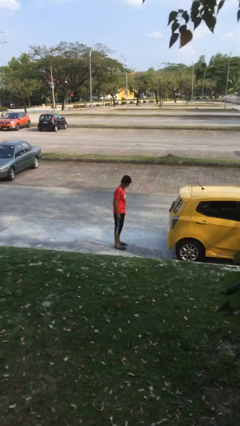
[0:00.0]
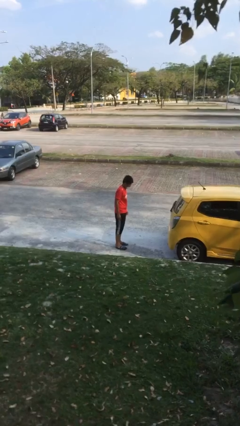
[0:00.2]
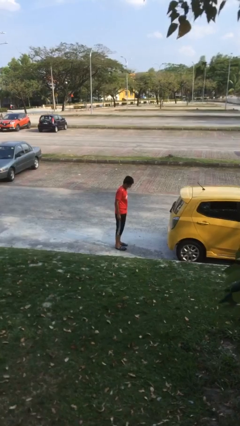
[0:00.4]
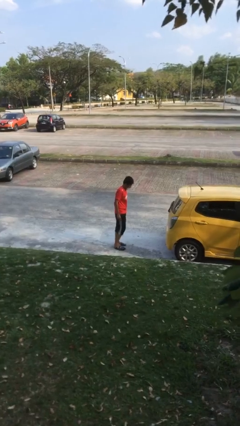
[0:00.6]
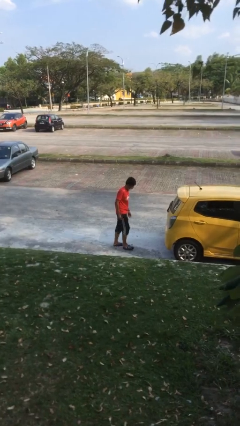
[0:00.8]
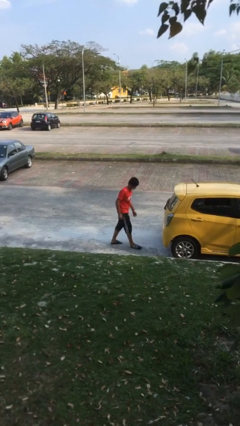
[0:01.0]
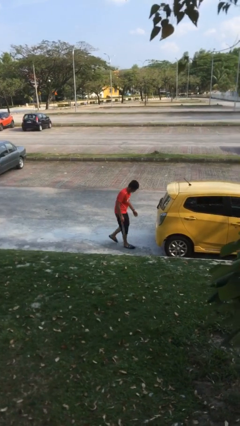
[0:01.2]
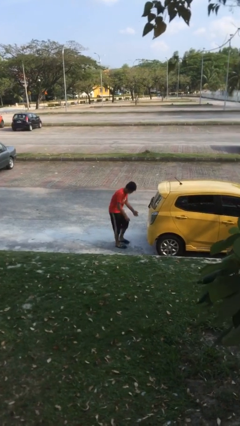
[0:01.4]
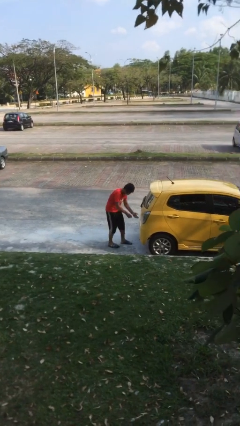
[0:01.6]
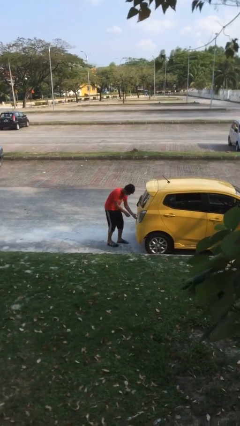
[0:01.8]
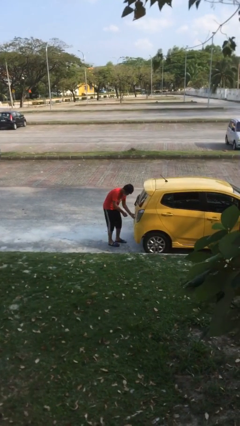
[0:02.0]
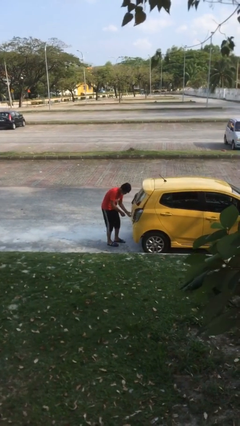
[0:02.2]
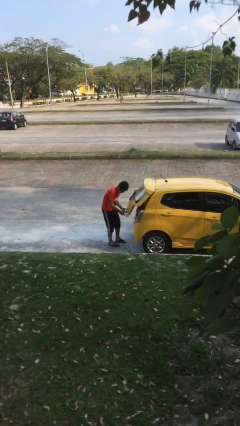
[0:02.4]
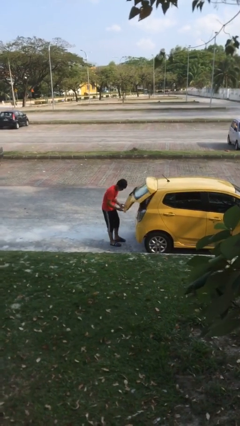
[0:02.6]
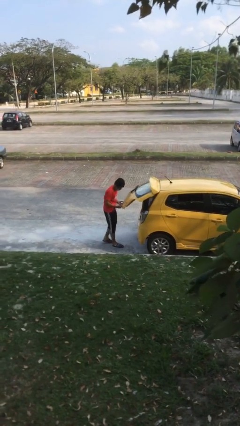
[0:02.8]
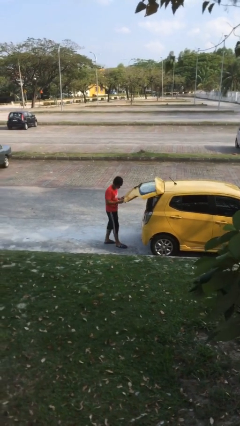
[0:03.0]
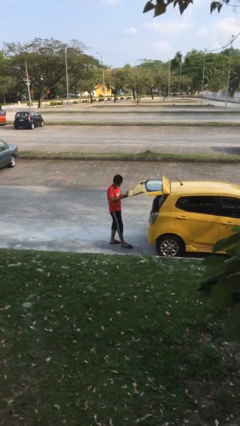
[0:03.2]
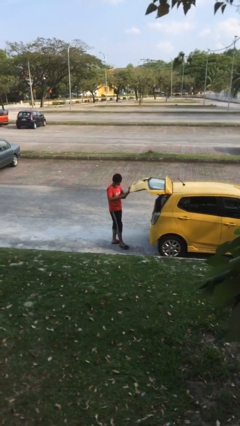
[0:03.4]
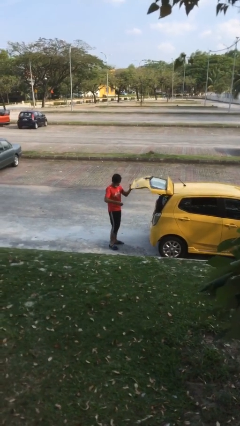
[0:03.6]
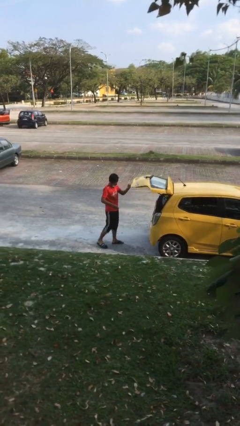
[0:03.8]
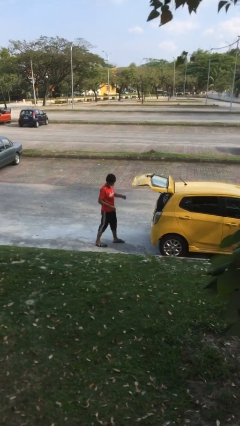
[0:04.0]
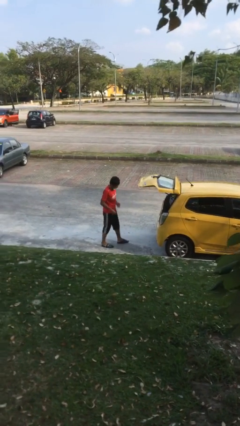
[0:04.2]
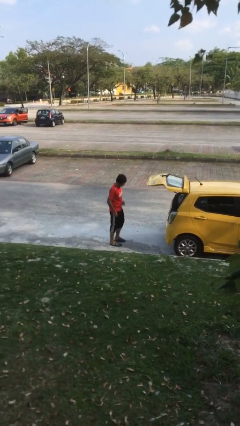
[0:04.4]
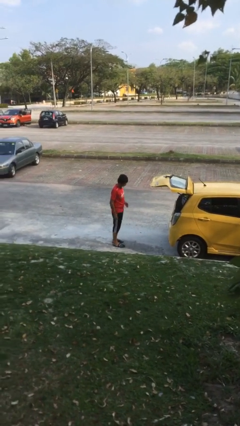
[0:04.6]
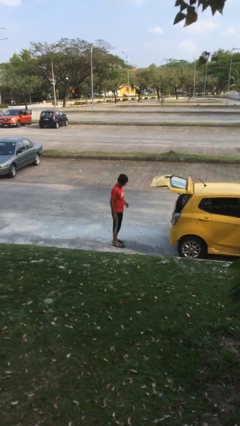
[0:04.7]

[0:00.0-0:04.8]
person opens car trunk

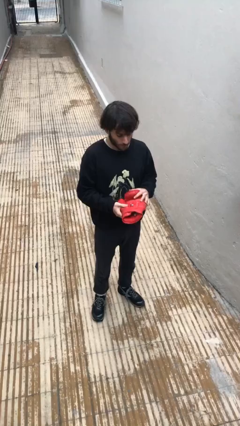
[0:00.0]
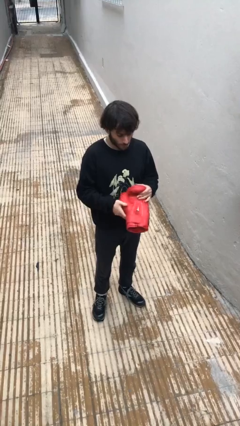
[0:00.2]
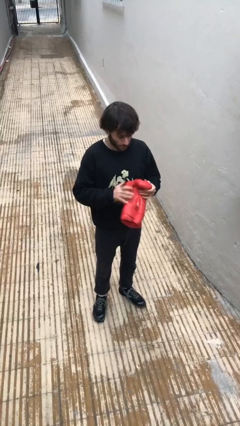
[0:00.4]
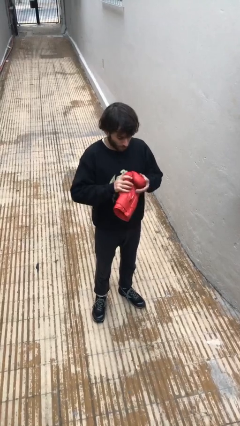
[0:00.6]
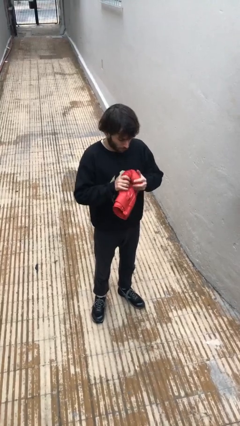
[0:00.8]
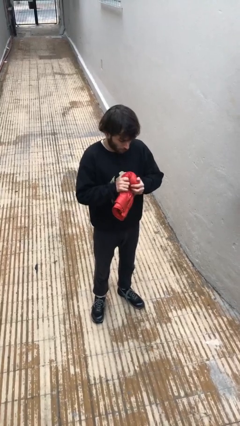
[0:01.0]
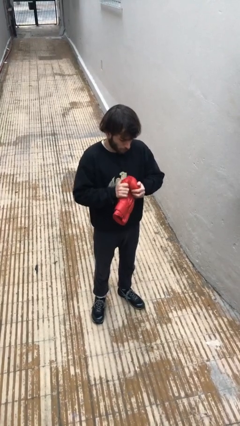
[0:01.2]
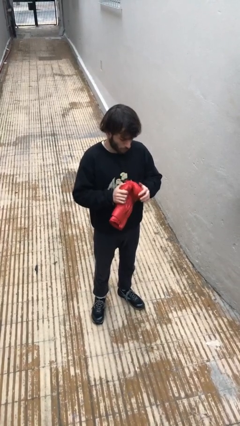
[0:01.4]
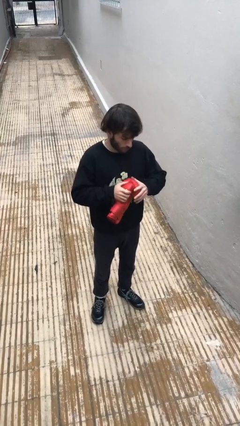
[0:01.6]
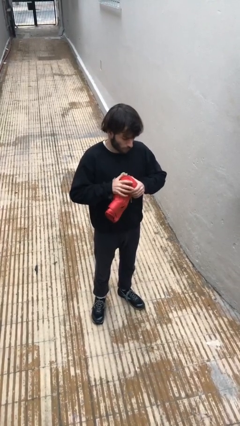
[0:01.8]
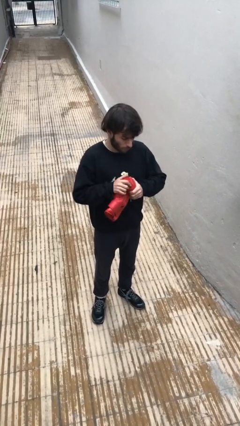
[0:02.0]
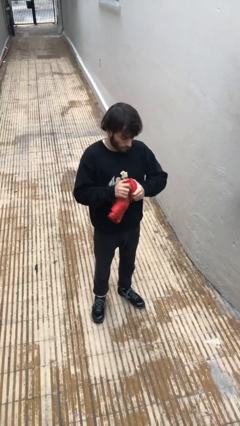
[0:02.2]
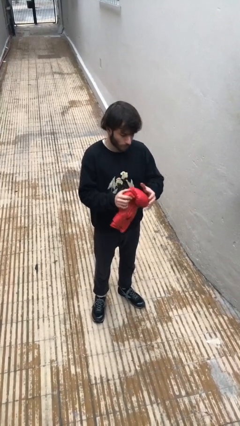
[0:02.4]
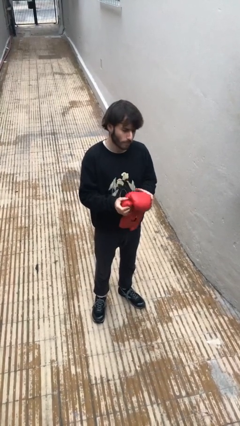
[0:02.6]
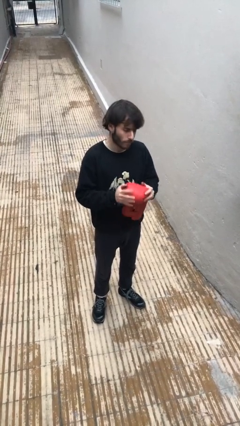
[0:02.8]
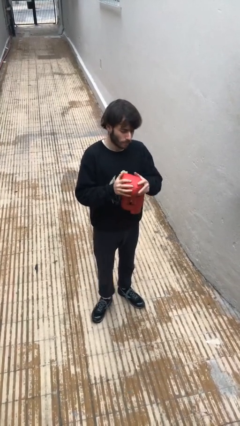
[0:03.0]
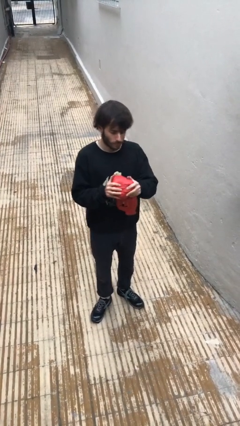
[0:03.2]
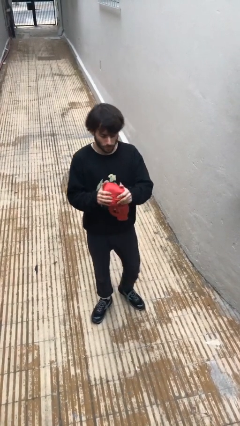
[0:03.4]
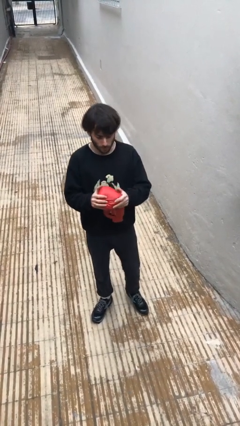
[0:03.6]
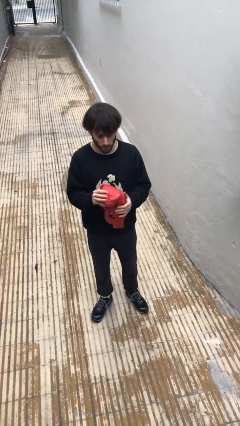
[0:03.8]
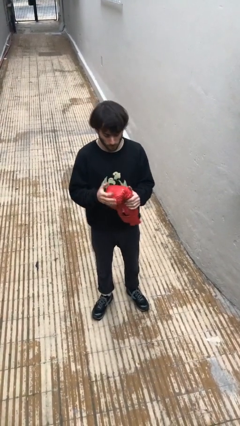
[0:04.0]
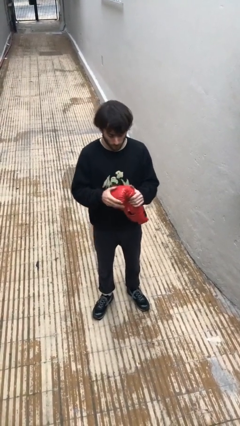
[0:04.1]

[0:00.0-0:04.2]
person squeezes object

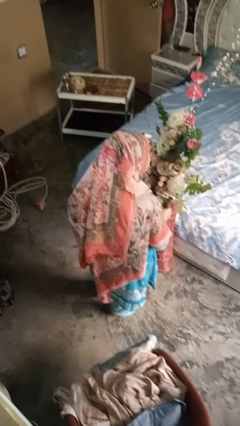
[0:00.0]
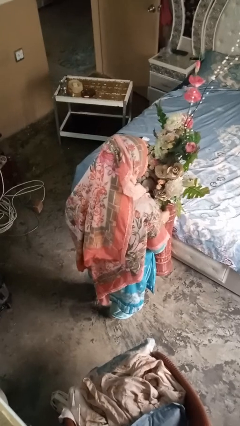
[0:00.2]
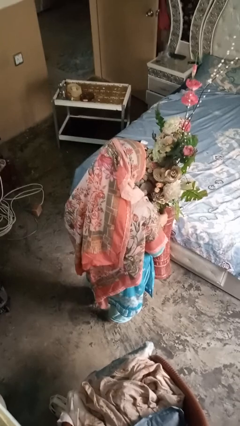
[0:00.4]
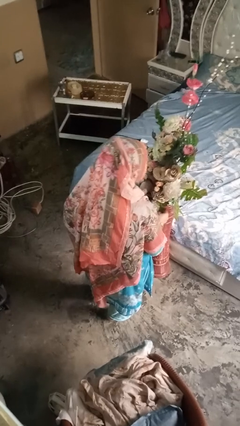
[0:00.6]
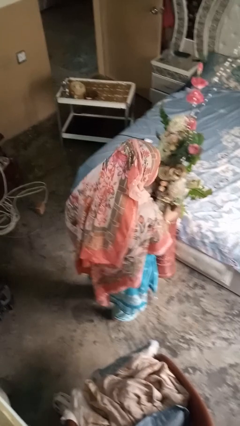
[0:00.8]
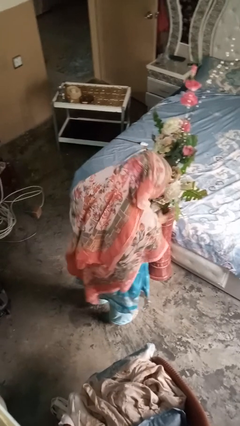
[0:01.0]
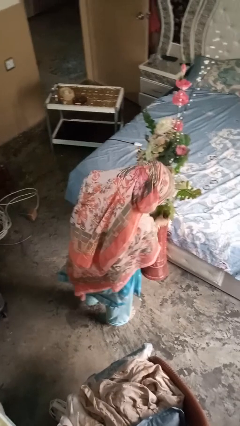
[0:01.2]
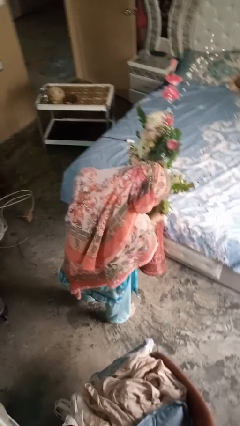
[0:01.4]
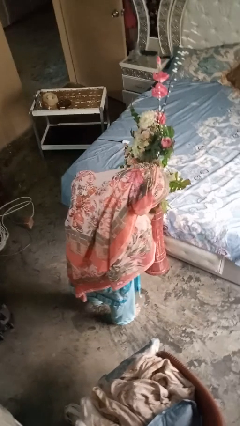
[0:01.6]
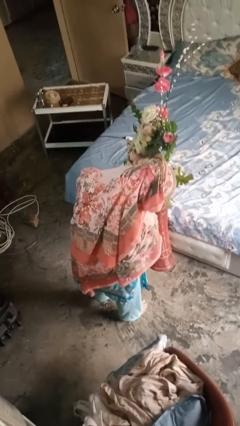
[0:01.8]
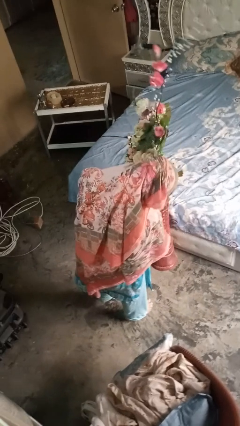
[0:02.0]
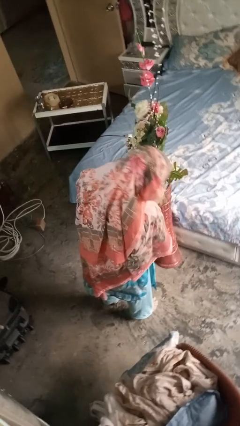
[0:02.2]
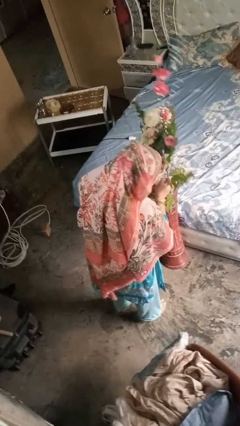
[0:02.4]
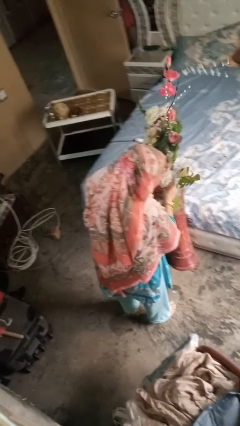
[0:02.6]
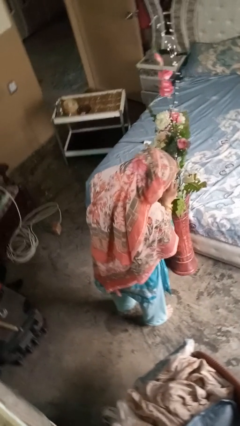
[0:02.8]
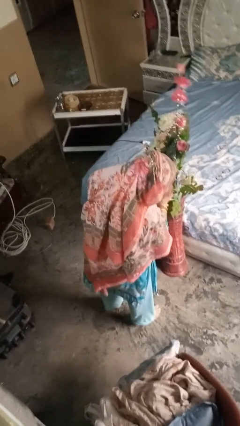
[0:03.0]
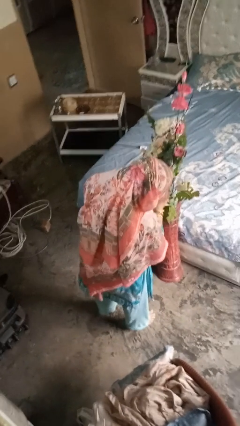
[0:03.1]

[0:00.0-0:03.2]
person arranges flowers in vase

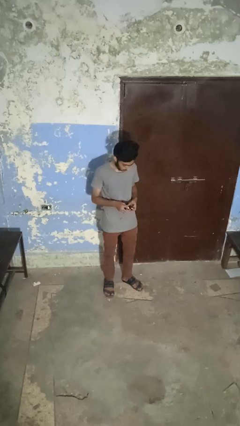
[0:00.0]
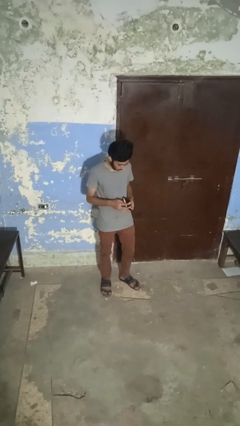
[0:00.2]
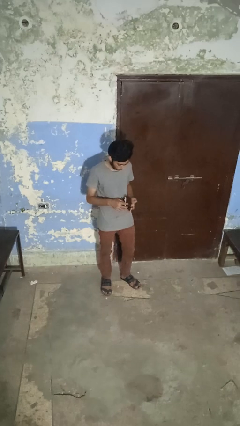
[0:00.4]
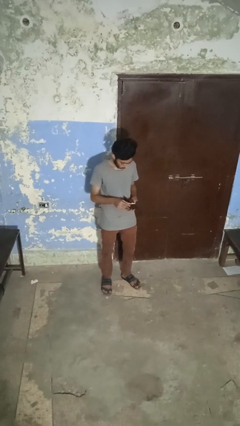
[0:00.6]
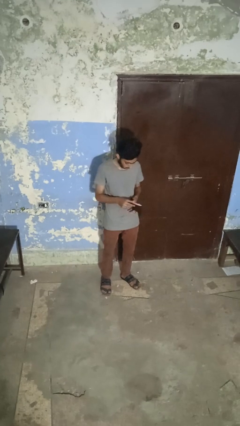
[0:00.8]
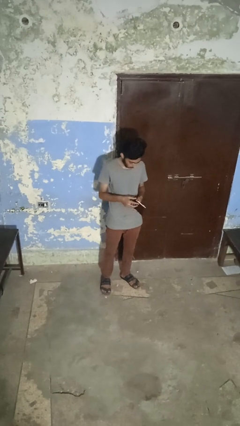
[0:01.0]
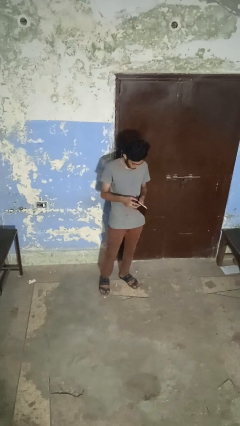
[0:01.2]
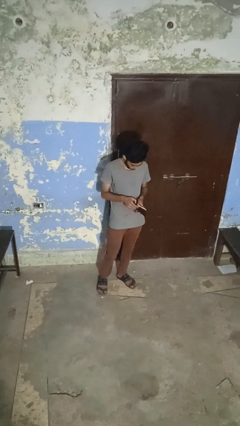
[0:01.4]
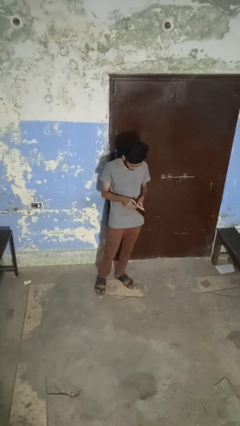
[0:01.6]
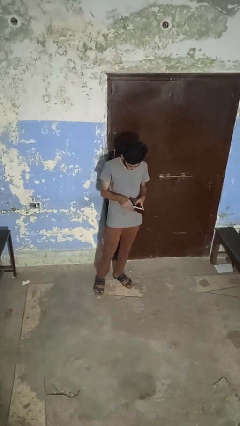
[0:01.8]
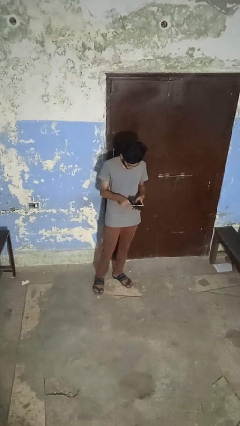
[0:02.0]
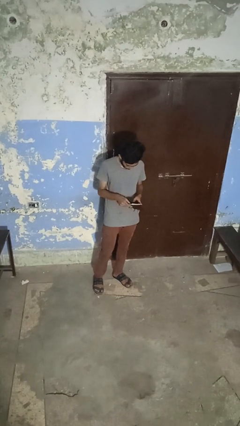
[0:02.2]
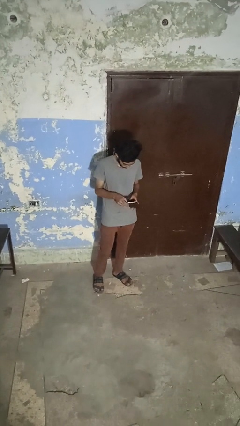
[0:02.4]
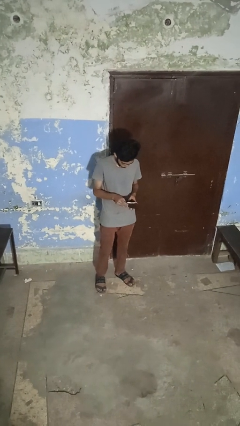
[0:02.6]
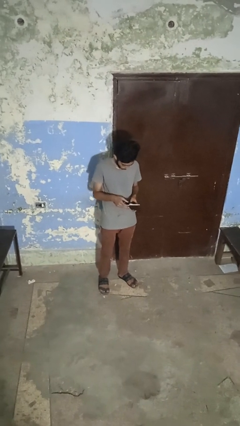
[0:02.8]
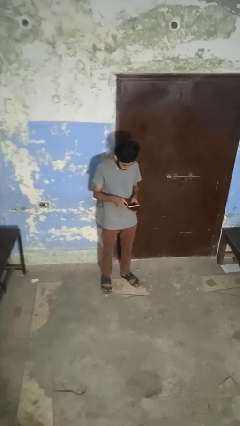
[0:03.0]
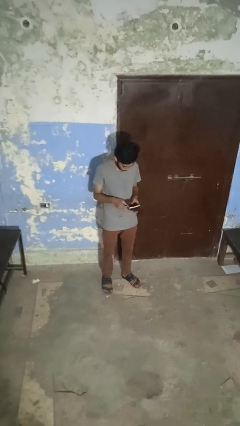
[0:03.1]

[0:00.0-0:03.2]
person searches in purse

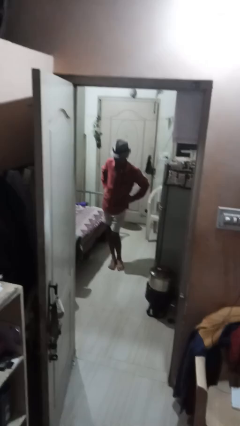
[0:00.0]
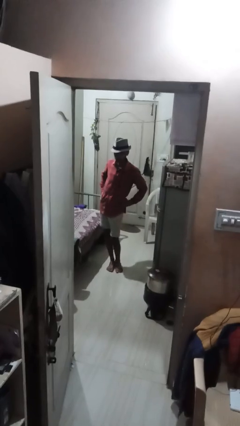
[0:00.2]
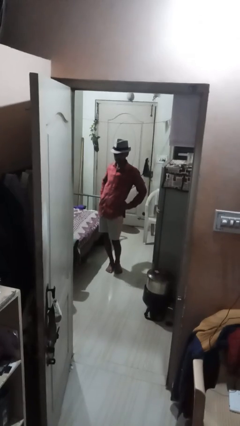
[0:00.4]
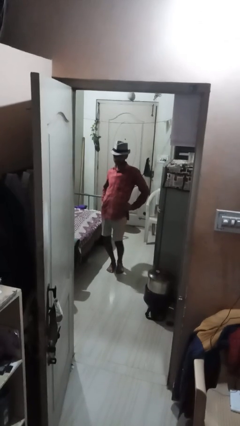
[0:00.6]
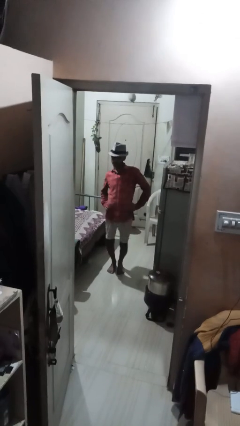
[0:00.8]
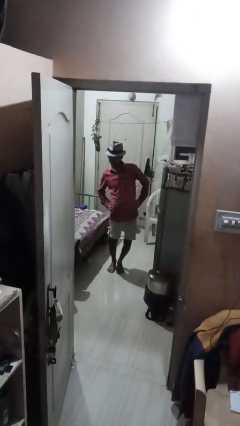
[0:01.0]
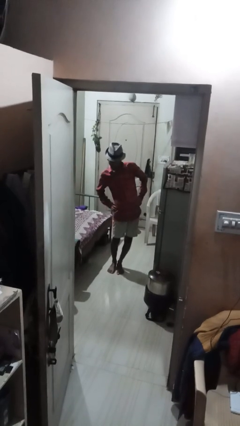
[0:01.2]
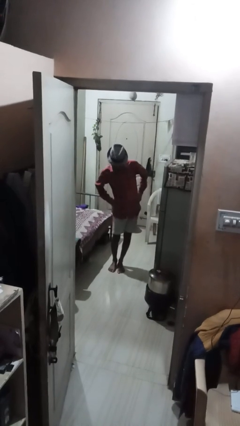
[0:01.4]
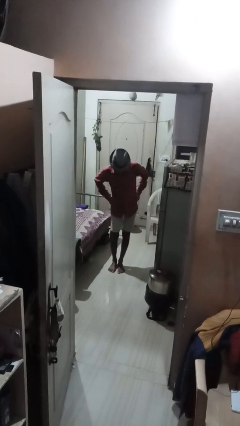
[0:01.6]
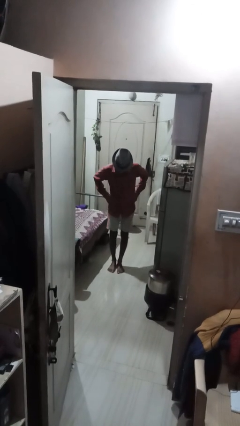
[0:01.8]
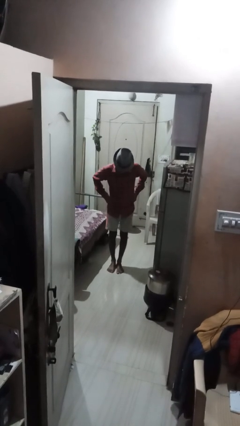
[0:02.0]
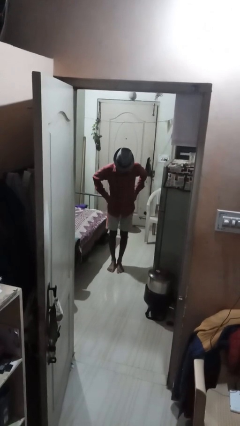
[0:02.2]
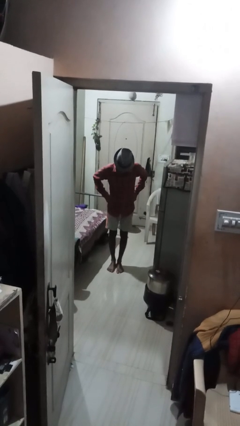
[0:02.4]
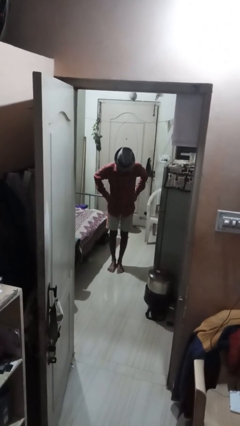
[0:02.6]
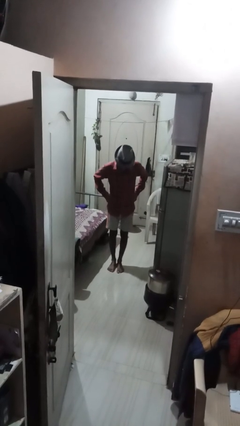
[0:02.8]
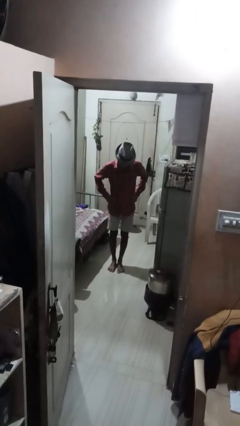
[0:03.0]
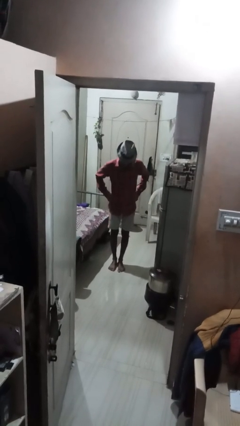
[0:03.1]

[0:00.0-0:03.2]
person wiggles hips
